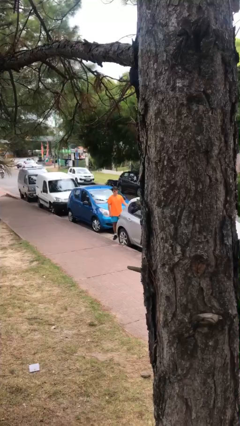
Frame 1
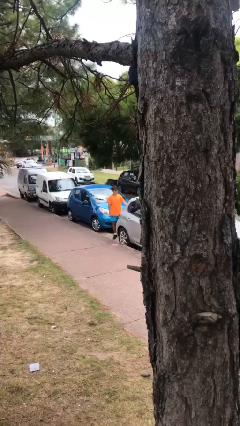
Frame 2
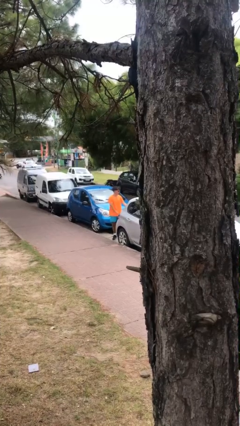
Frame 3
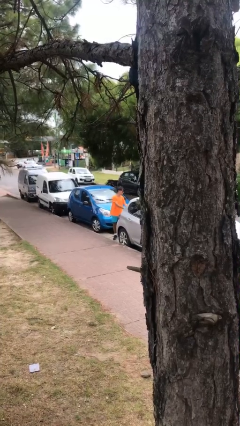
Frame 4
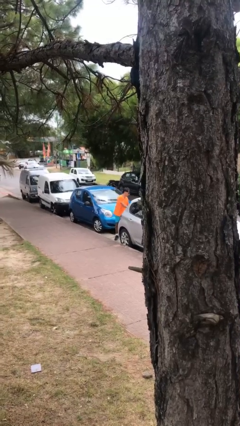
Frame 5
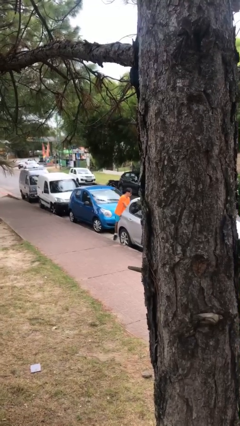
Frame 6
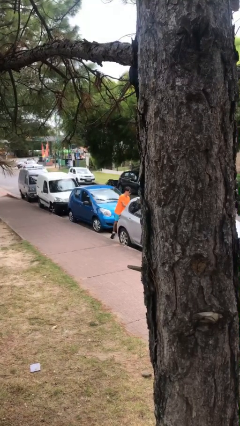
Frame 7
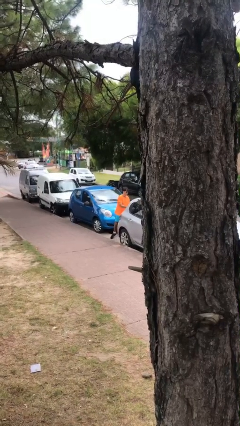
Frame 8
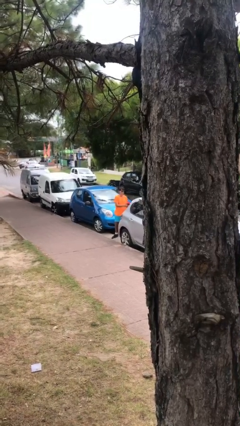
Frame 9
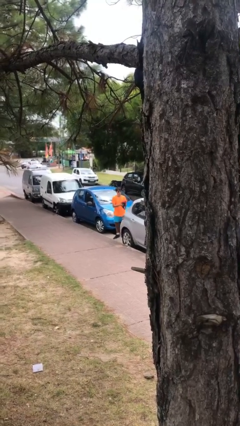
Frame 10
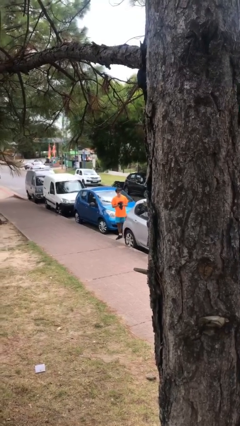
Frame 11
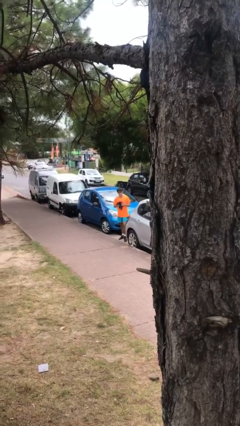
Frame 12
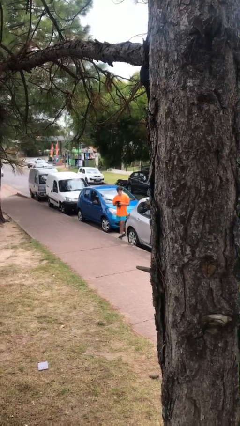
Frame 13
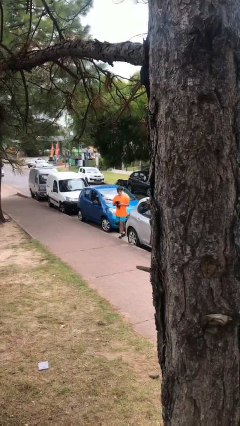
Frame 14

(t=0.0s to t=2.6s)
person unloads car

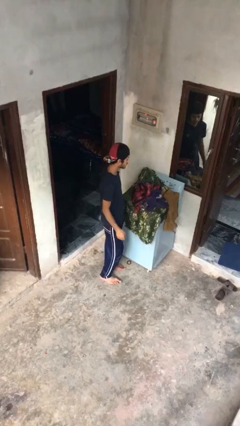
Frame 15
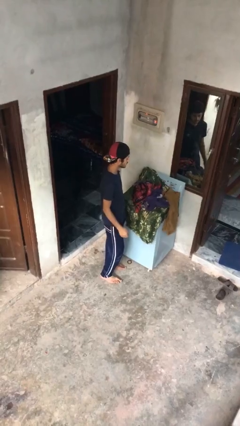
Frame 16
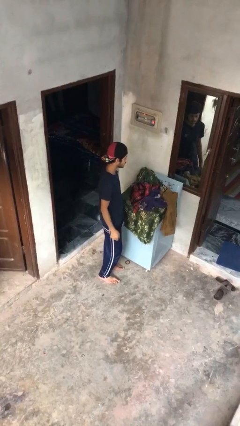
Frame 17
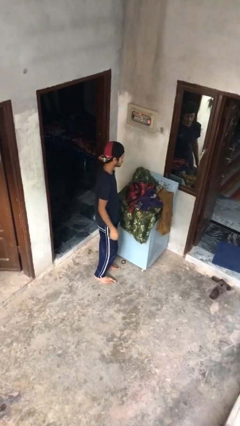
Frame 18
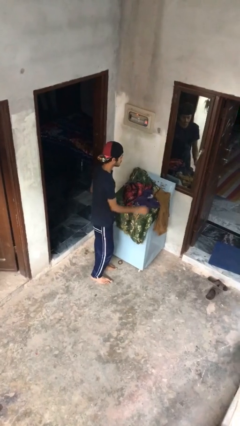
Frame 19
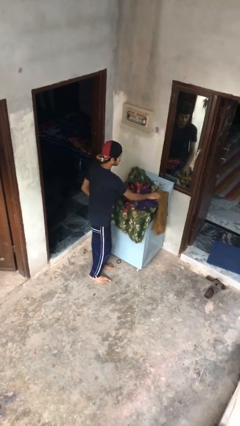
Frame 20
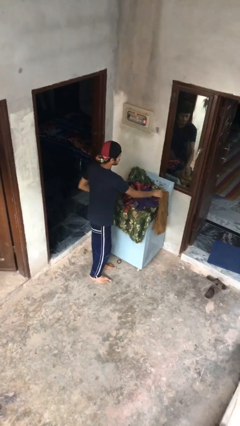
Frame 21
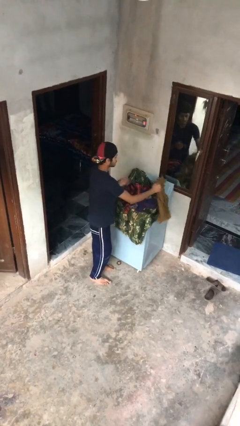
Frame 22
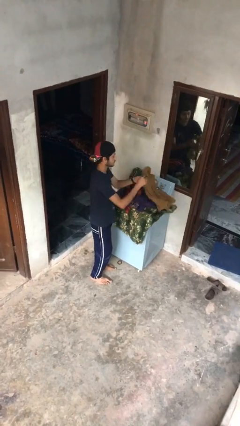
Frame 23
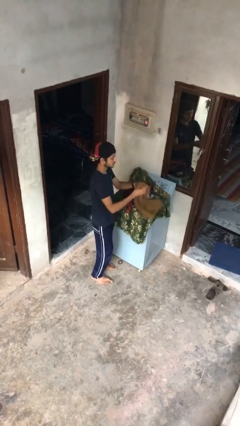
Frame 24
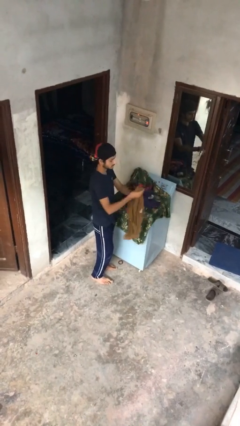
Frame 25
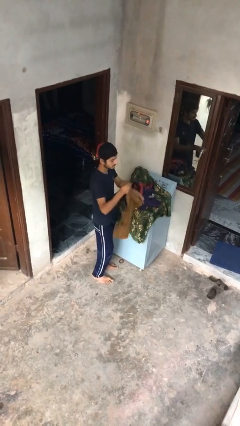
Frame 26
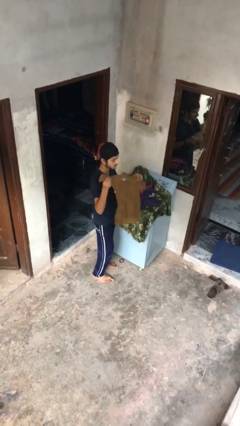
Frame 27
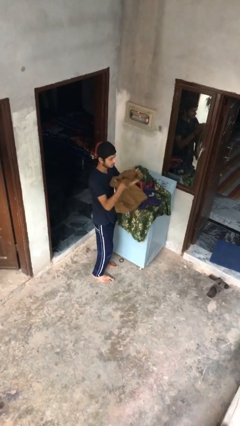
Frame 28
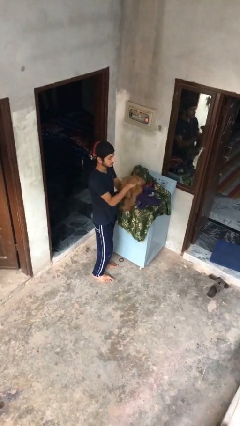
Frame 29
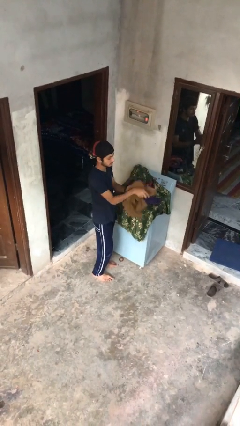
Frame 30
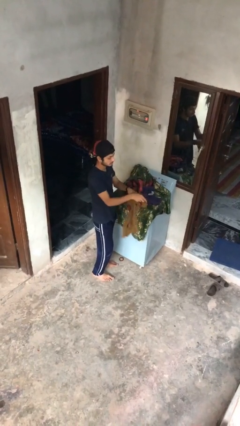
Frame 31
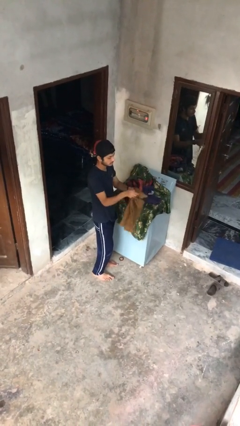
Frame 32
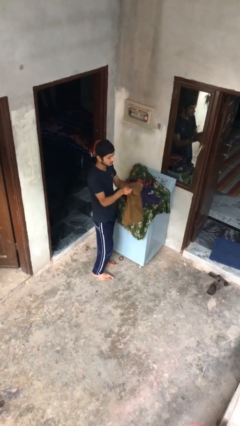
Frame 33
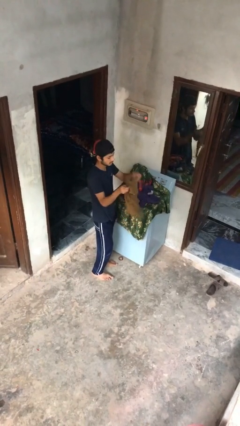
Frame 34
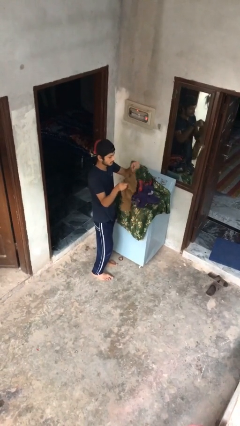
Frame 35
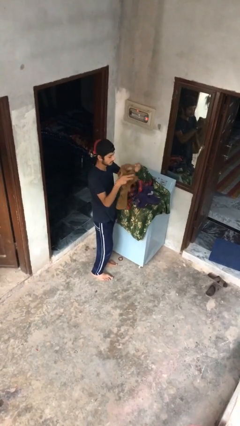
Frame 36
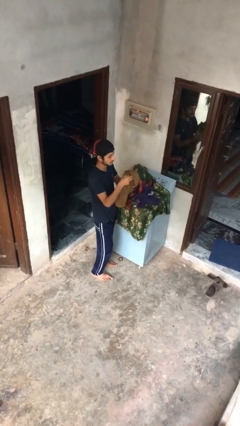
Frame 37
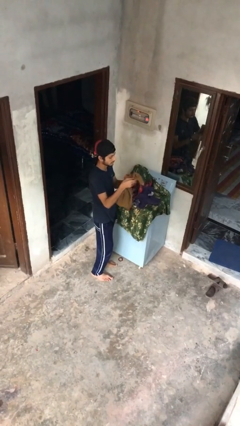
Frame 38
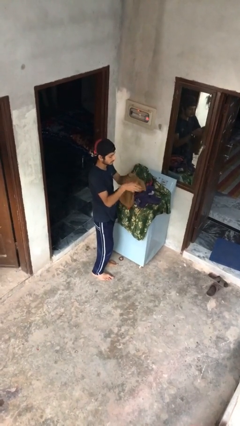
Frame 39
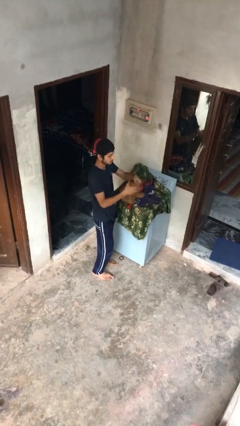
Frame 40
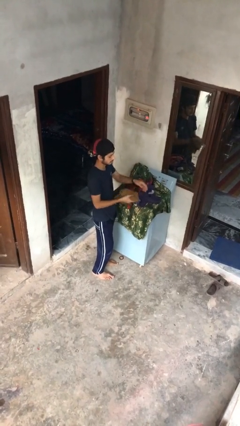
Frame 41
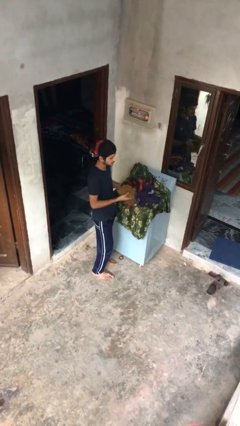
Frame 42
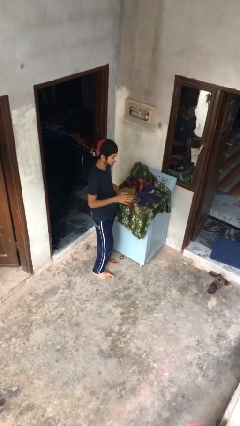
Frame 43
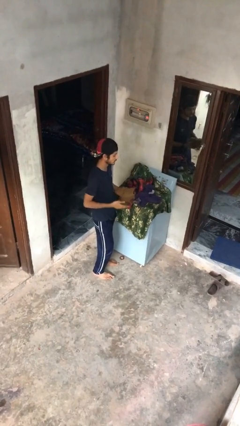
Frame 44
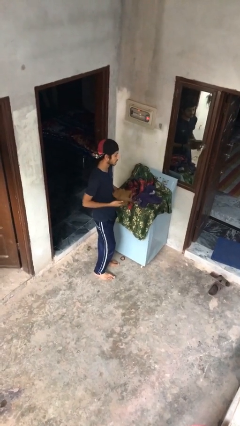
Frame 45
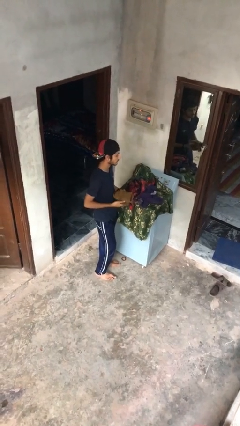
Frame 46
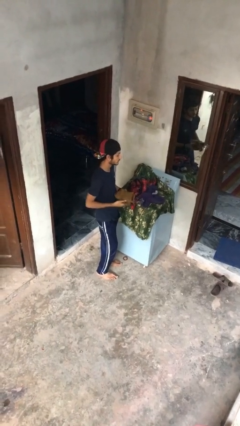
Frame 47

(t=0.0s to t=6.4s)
person folds shirt

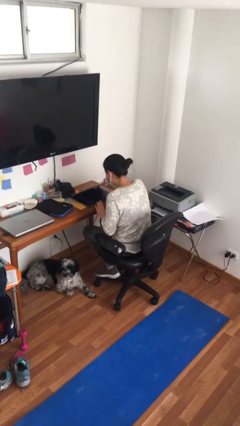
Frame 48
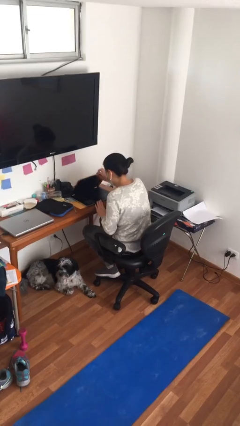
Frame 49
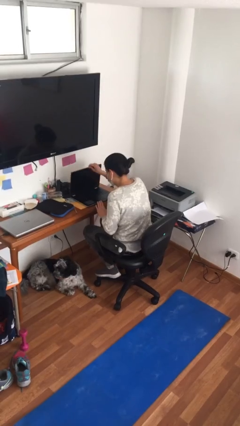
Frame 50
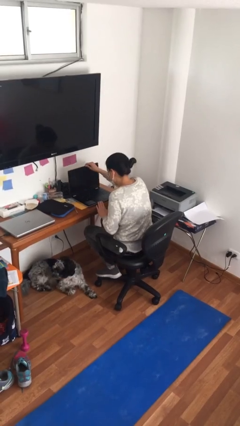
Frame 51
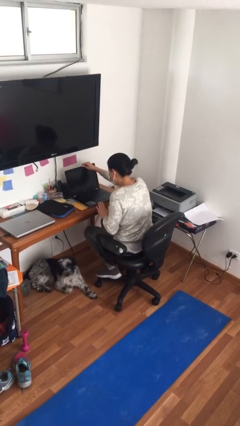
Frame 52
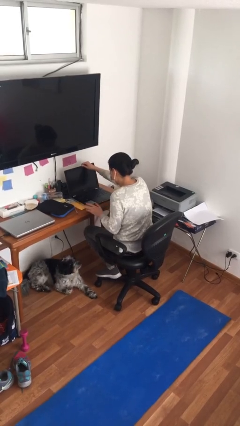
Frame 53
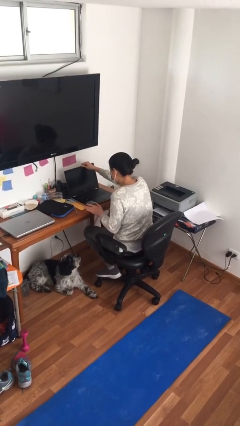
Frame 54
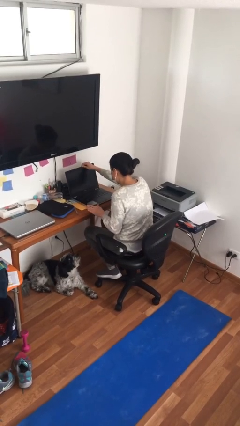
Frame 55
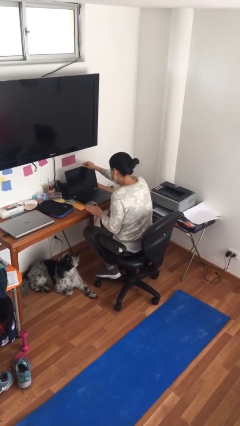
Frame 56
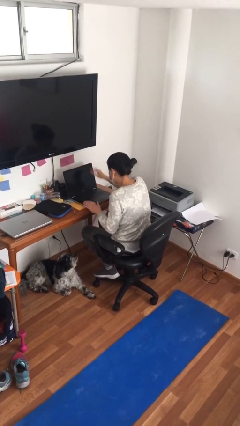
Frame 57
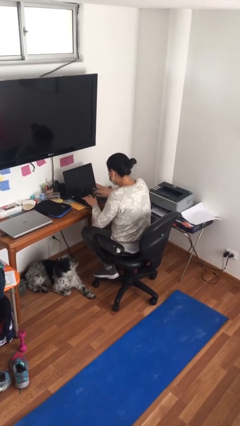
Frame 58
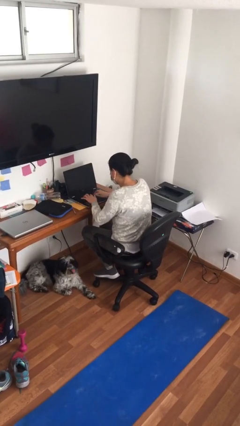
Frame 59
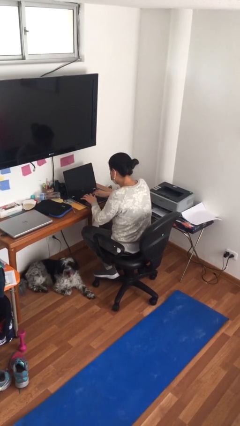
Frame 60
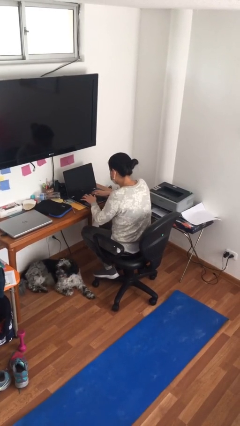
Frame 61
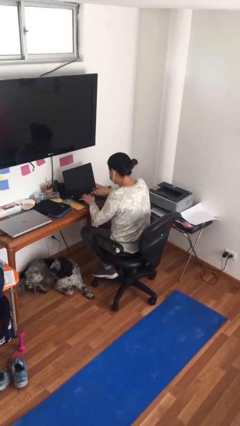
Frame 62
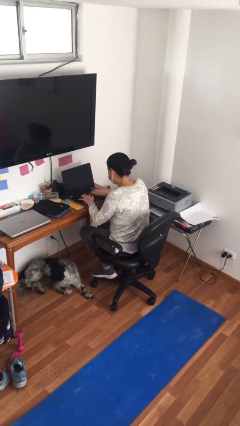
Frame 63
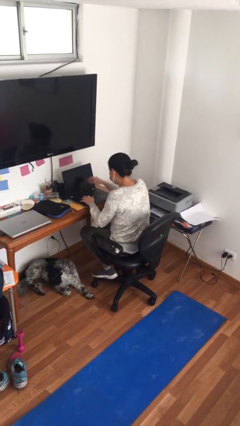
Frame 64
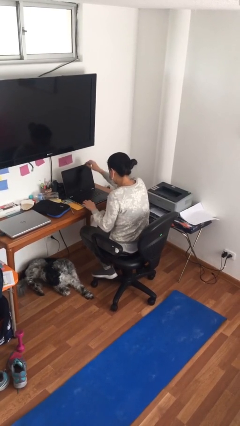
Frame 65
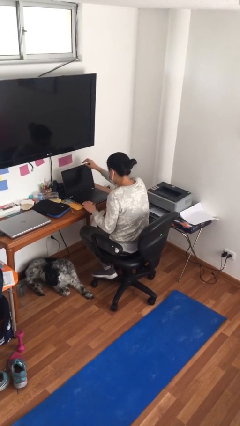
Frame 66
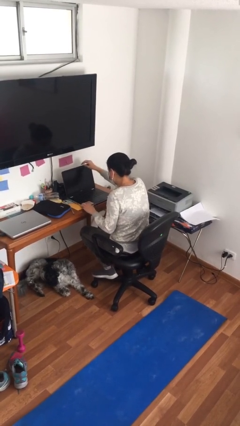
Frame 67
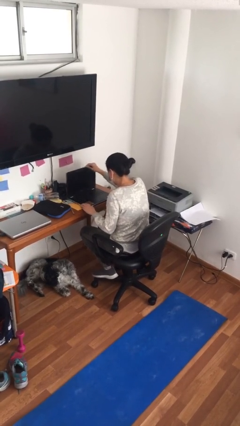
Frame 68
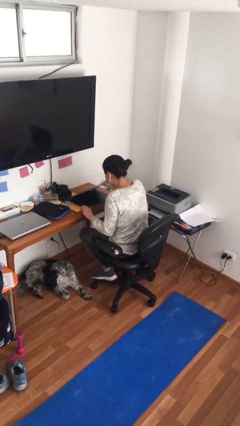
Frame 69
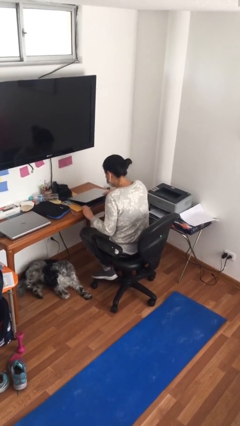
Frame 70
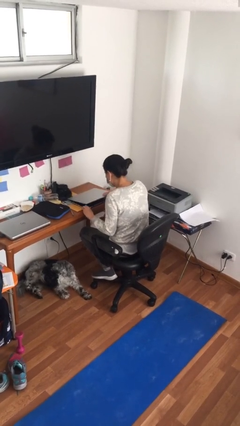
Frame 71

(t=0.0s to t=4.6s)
person interacts with laptop

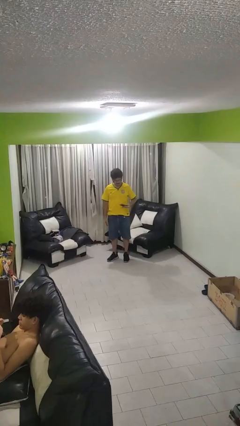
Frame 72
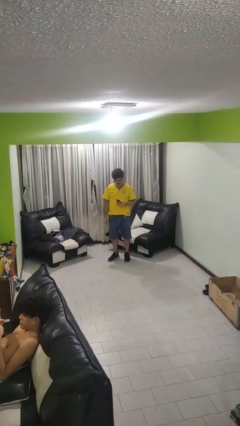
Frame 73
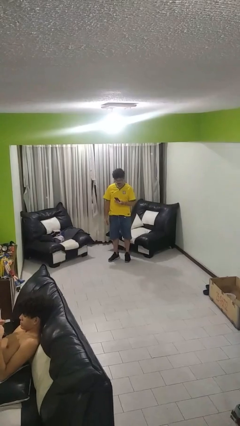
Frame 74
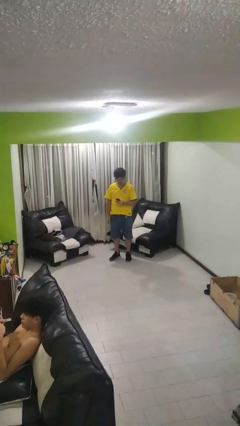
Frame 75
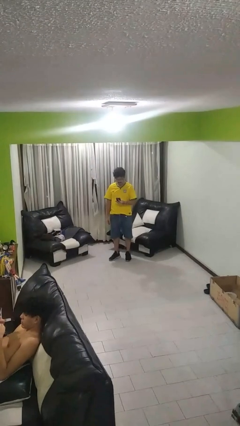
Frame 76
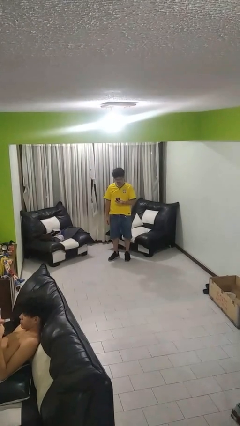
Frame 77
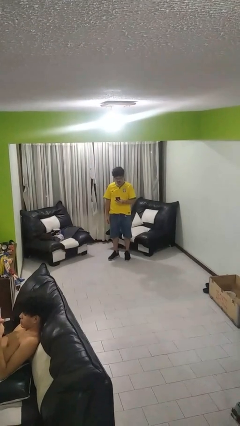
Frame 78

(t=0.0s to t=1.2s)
person takes phone from pocket

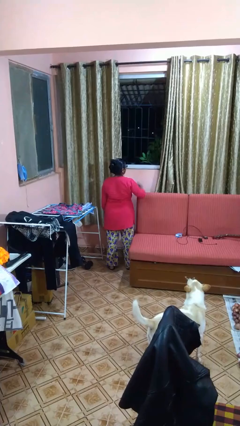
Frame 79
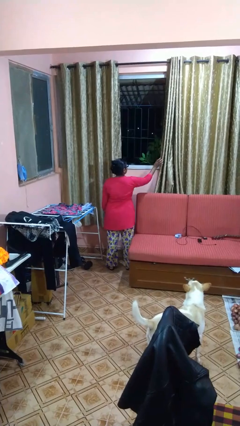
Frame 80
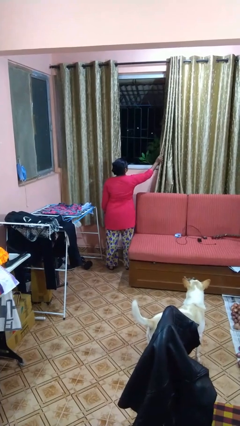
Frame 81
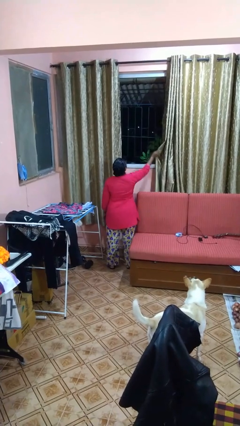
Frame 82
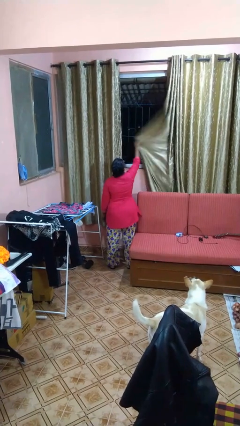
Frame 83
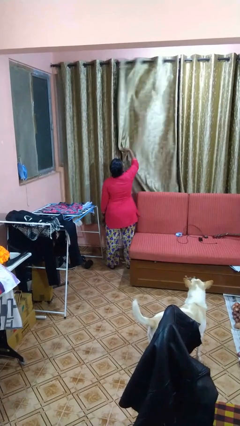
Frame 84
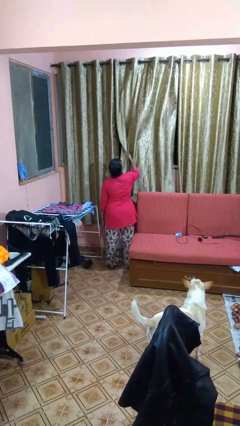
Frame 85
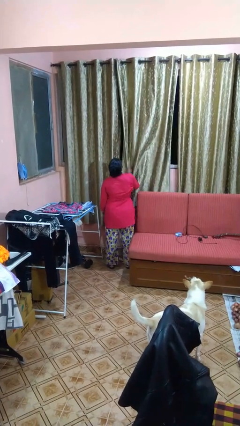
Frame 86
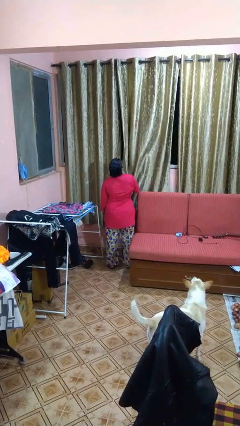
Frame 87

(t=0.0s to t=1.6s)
person closes curtains

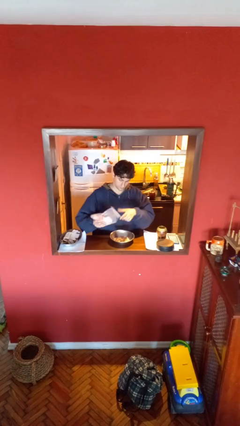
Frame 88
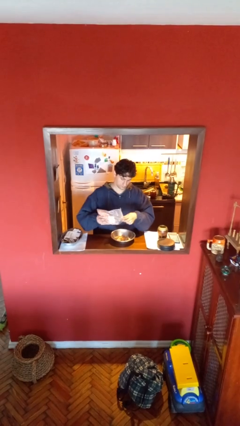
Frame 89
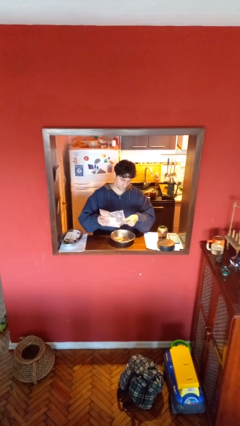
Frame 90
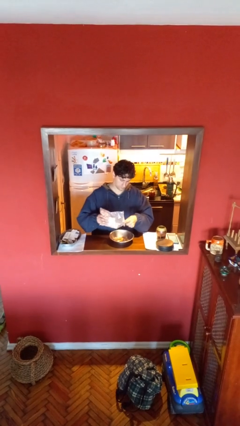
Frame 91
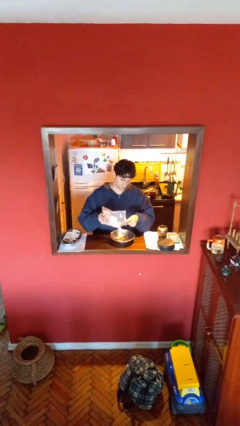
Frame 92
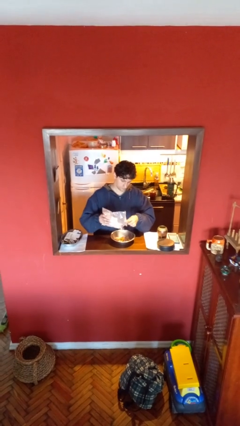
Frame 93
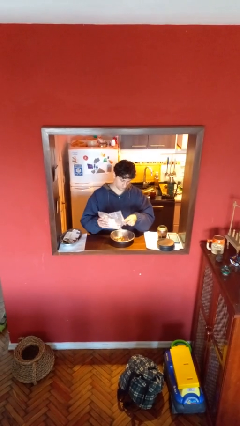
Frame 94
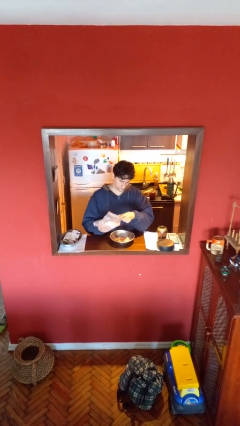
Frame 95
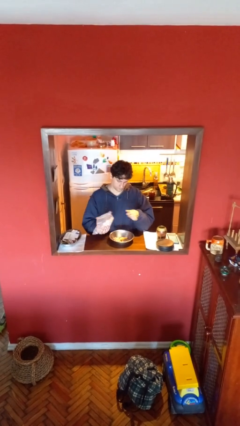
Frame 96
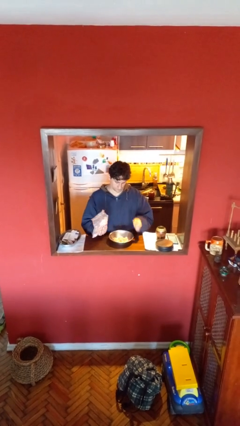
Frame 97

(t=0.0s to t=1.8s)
person pours into bowl
